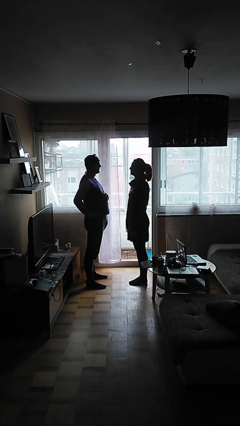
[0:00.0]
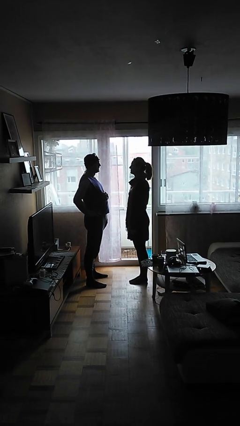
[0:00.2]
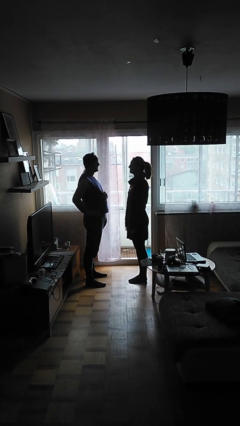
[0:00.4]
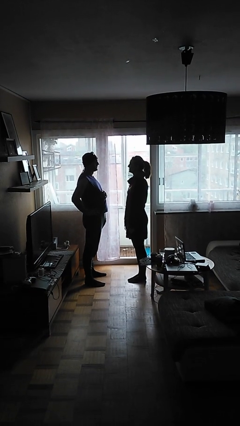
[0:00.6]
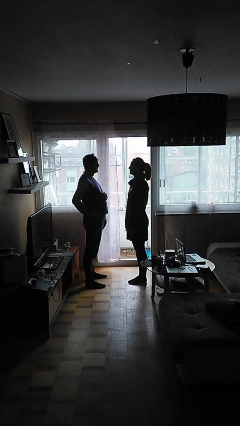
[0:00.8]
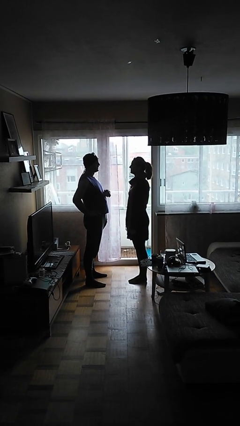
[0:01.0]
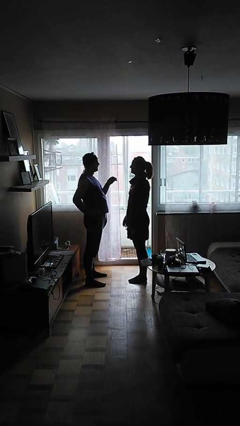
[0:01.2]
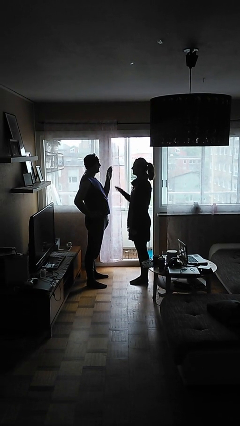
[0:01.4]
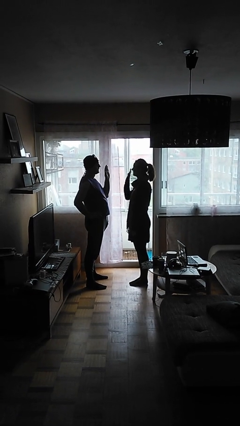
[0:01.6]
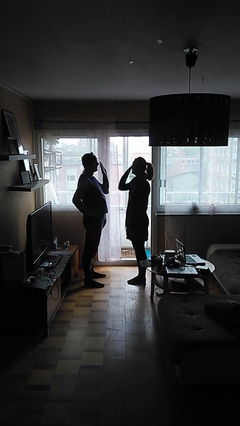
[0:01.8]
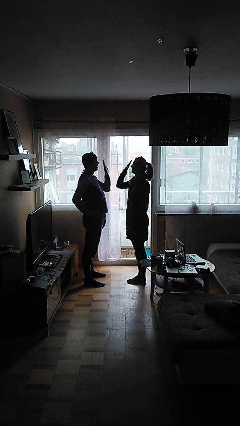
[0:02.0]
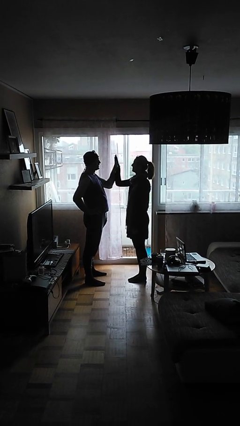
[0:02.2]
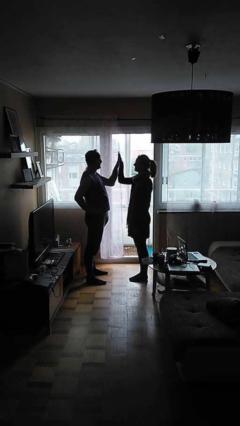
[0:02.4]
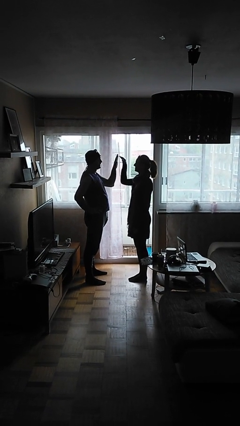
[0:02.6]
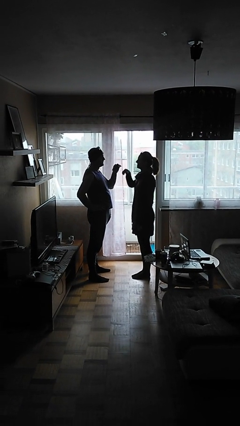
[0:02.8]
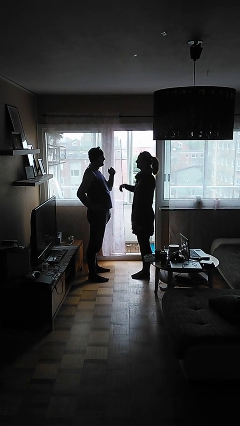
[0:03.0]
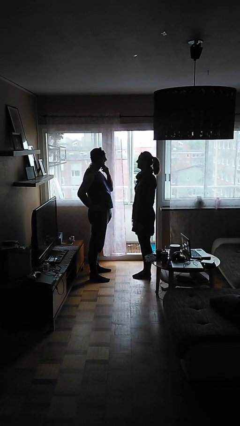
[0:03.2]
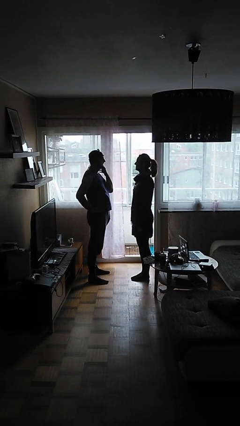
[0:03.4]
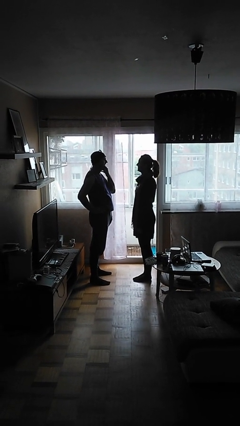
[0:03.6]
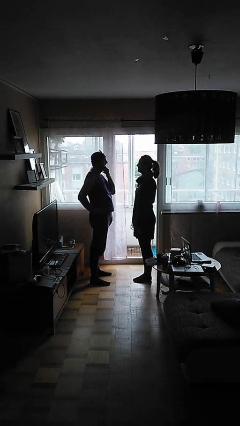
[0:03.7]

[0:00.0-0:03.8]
person highfives hand

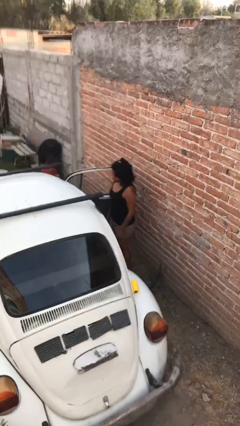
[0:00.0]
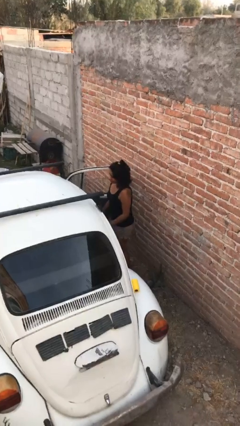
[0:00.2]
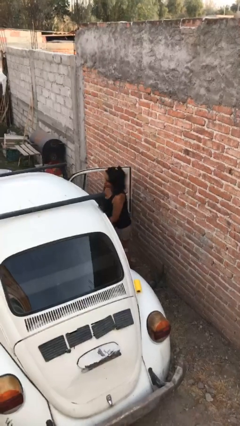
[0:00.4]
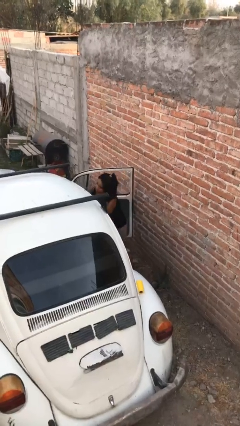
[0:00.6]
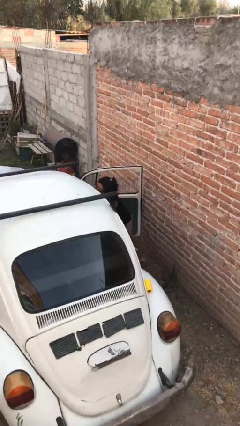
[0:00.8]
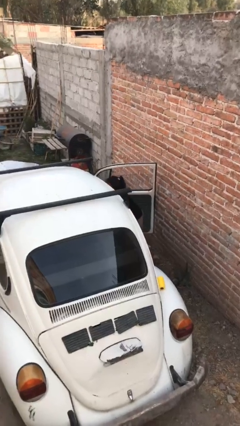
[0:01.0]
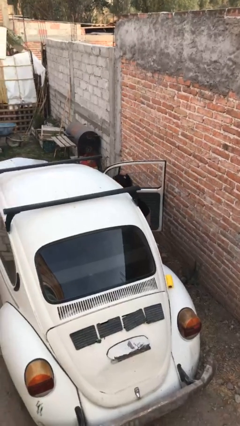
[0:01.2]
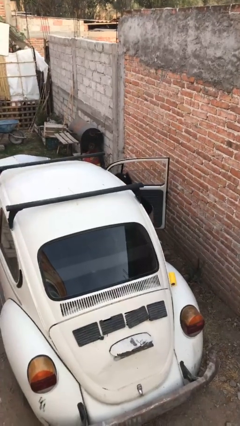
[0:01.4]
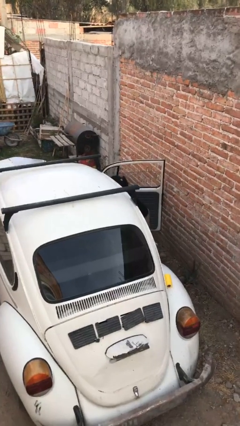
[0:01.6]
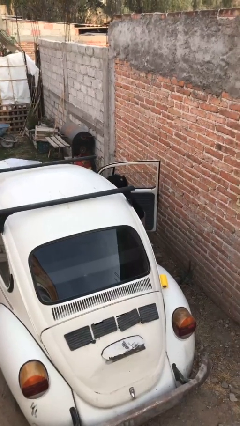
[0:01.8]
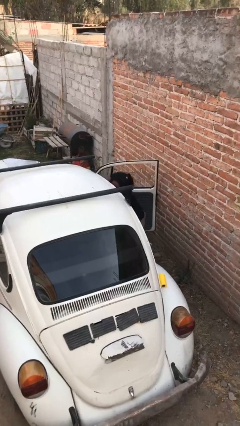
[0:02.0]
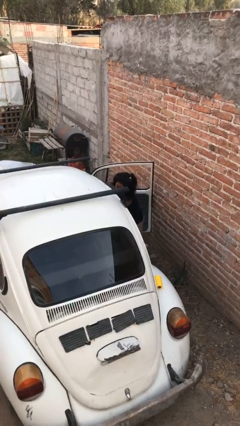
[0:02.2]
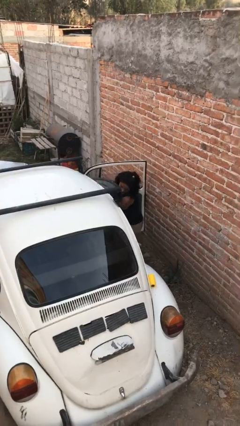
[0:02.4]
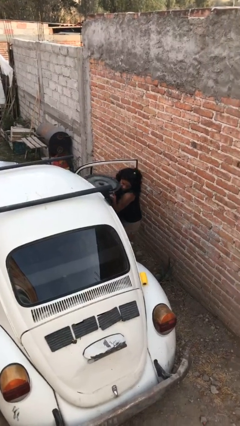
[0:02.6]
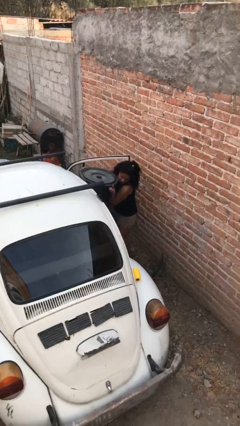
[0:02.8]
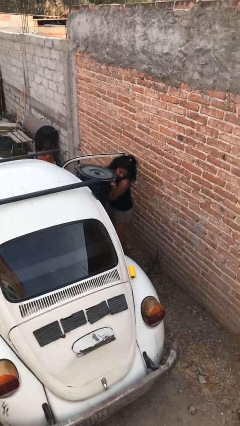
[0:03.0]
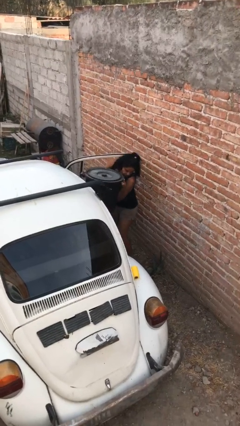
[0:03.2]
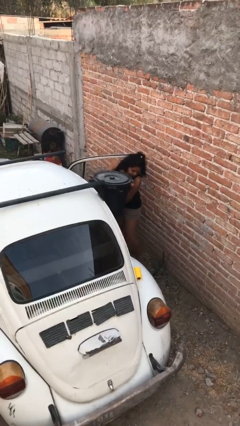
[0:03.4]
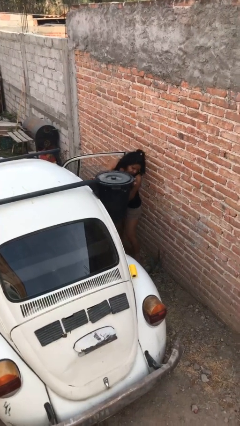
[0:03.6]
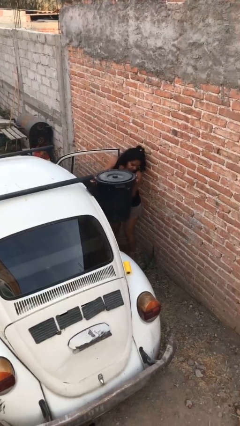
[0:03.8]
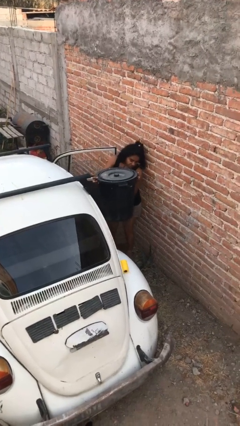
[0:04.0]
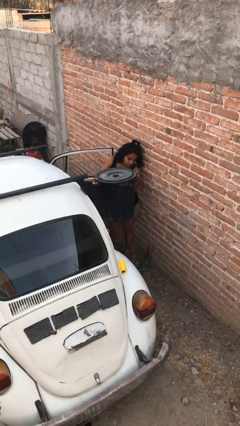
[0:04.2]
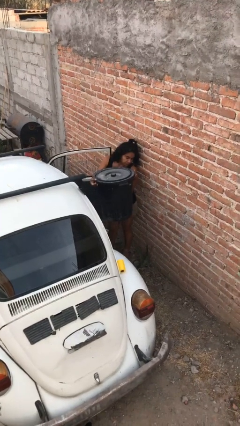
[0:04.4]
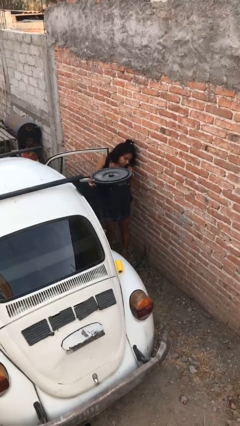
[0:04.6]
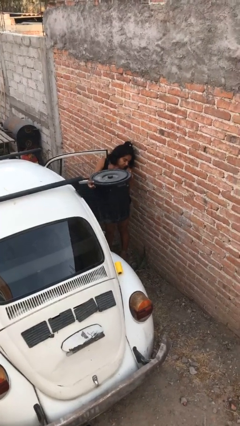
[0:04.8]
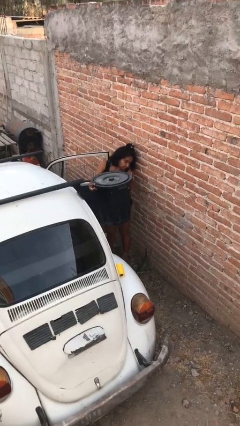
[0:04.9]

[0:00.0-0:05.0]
person unloads car

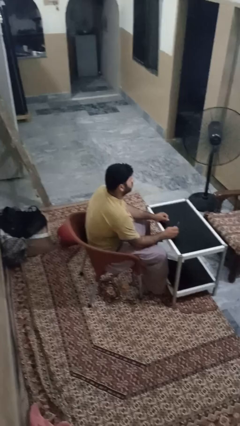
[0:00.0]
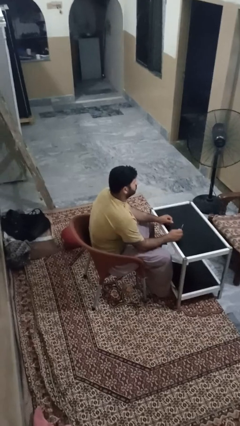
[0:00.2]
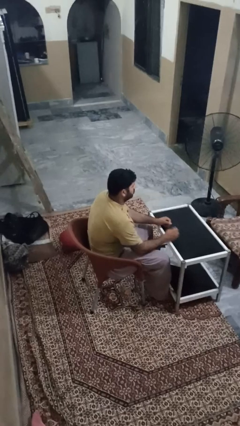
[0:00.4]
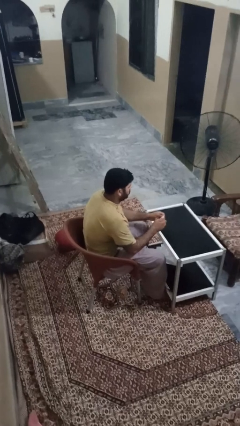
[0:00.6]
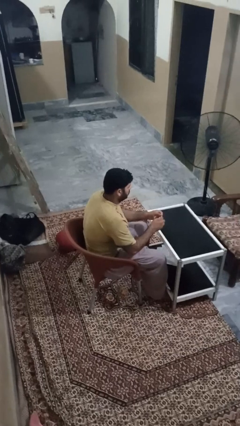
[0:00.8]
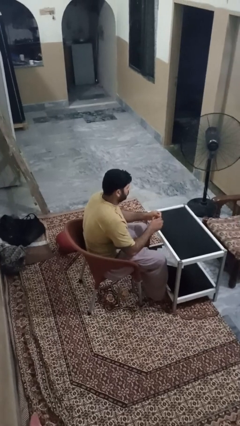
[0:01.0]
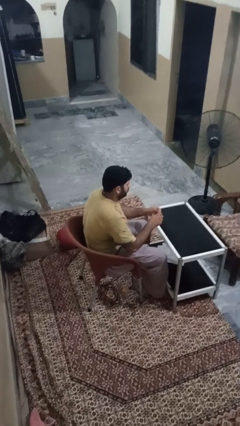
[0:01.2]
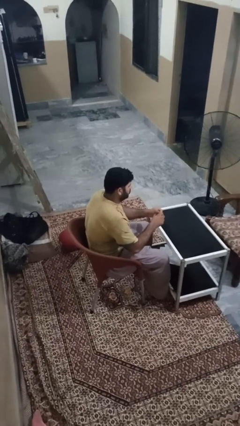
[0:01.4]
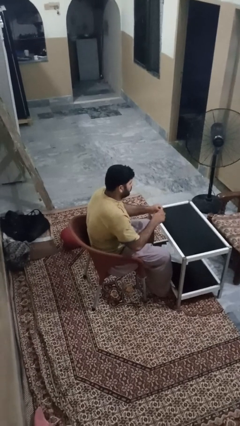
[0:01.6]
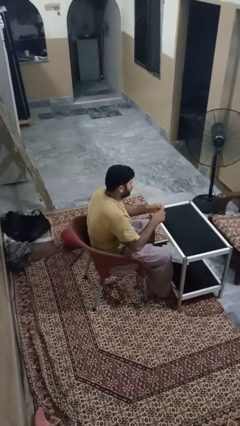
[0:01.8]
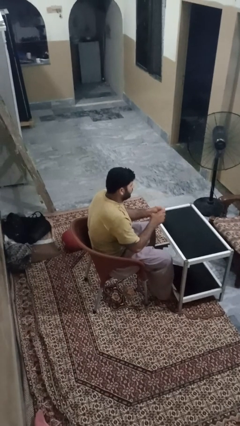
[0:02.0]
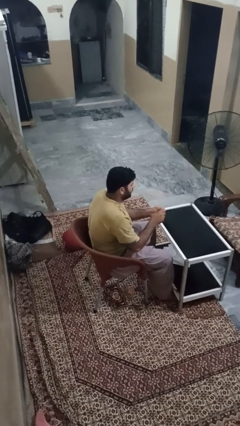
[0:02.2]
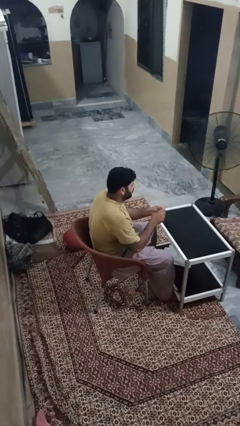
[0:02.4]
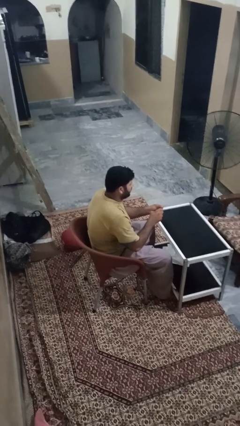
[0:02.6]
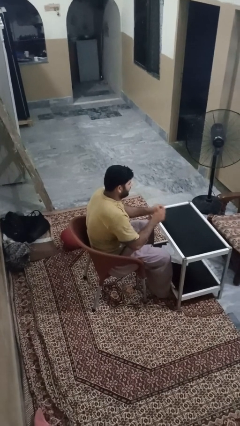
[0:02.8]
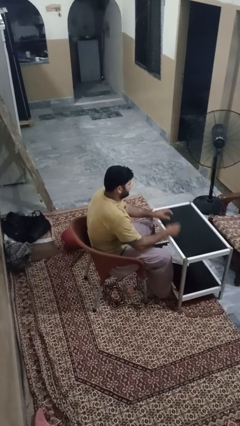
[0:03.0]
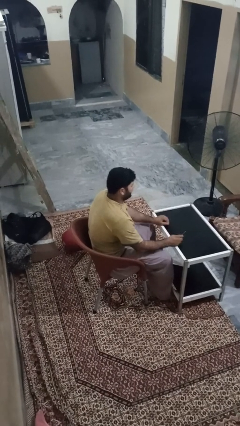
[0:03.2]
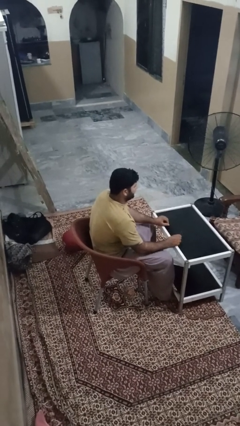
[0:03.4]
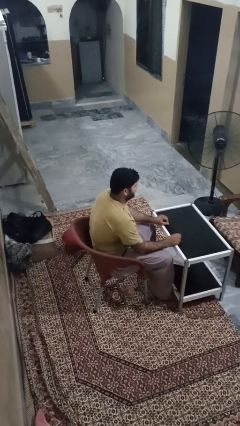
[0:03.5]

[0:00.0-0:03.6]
person files fingernails

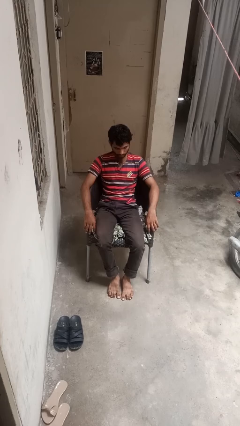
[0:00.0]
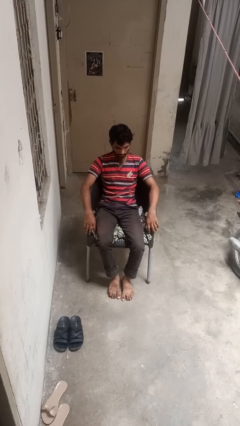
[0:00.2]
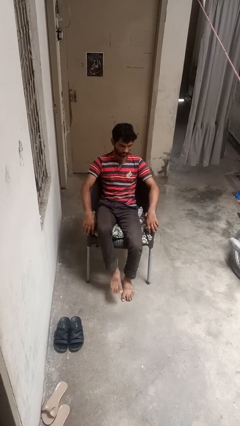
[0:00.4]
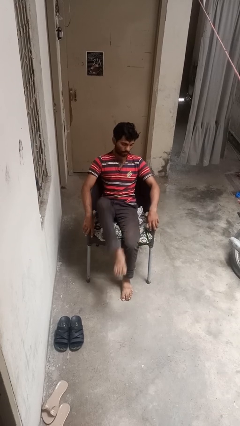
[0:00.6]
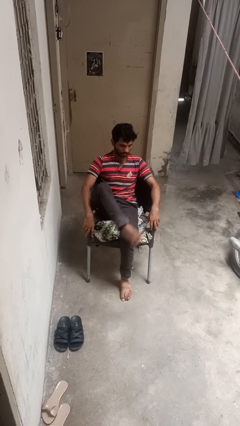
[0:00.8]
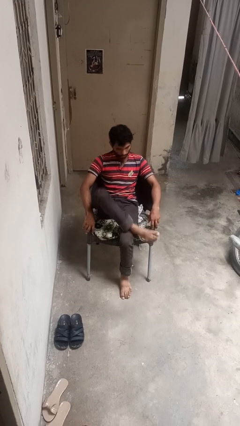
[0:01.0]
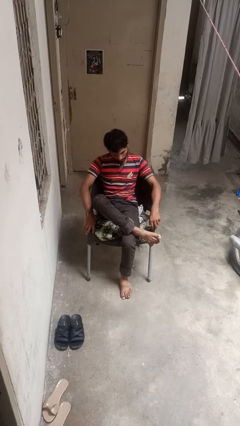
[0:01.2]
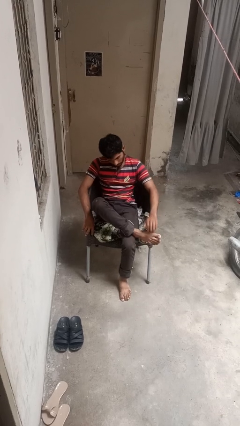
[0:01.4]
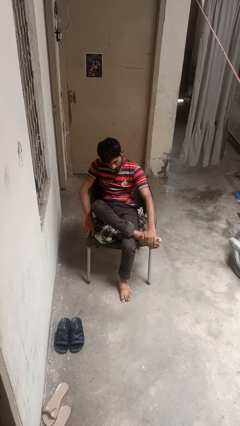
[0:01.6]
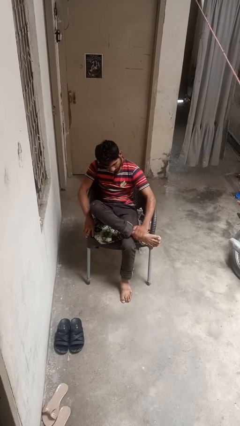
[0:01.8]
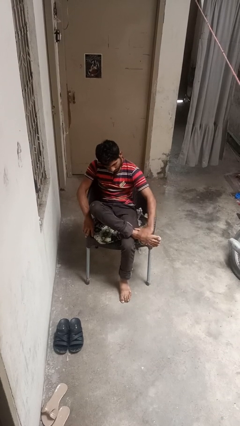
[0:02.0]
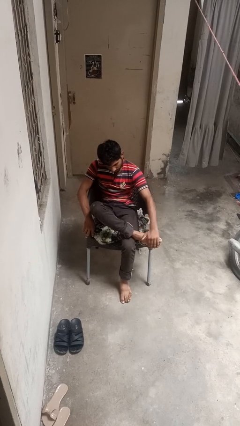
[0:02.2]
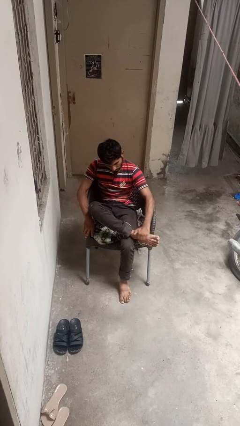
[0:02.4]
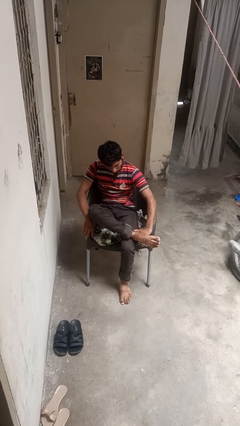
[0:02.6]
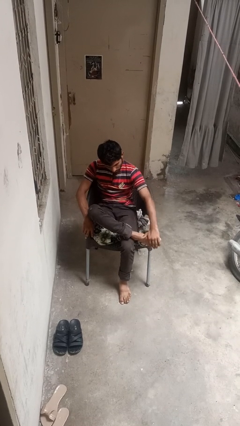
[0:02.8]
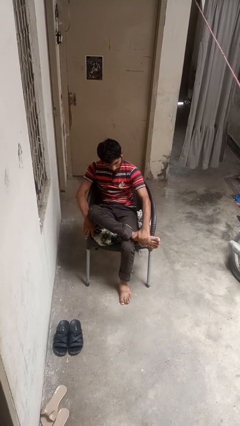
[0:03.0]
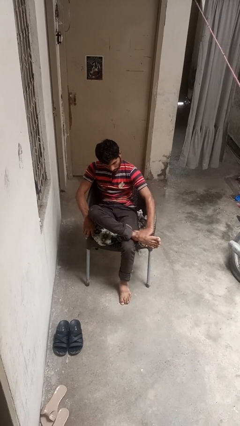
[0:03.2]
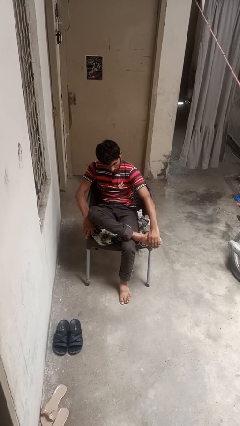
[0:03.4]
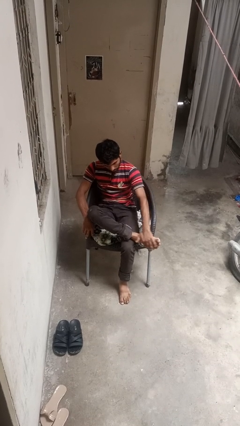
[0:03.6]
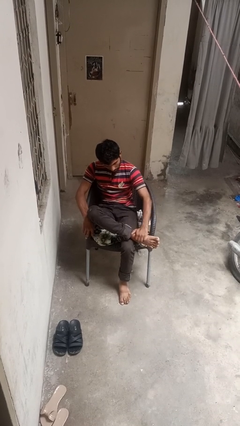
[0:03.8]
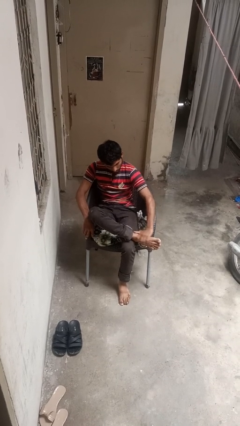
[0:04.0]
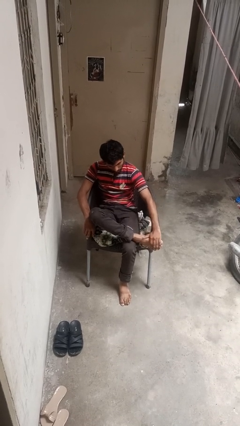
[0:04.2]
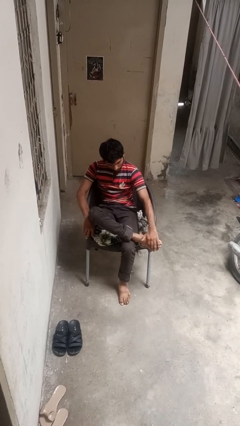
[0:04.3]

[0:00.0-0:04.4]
person rubs foot

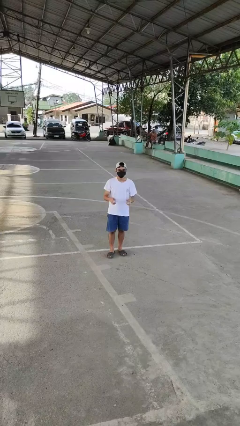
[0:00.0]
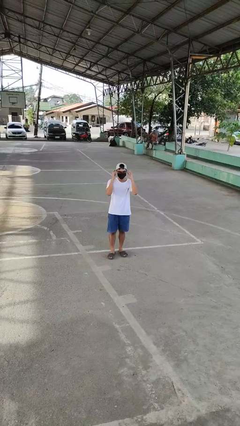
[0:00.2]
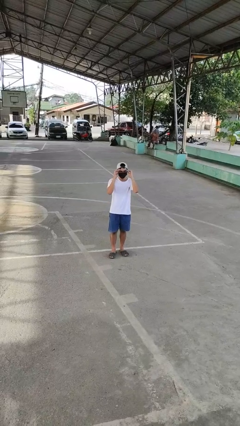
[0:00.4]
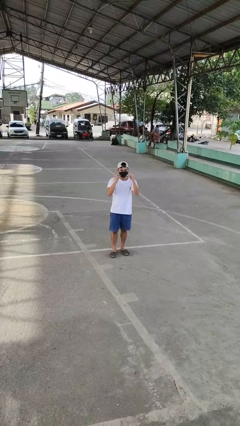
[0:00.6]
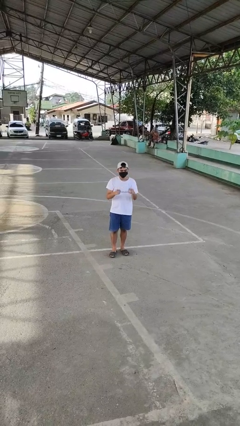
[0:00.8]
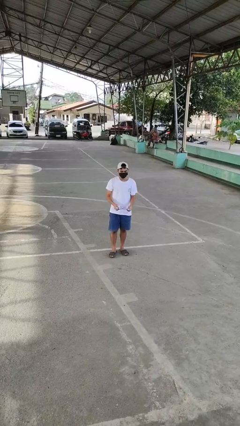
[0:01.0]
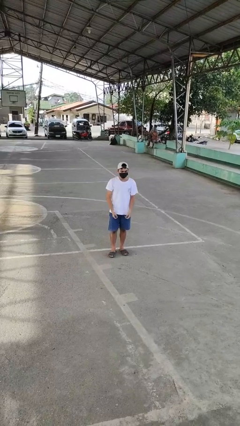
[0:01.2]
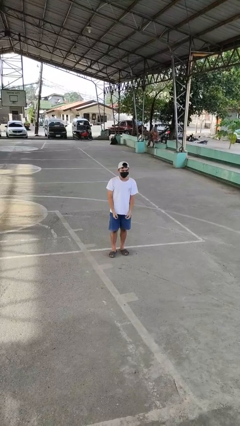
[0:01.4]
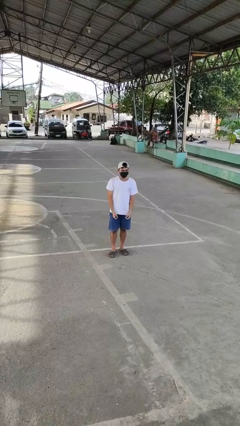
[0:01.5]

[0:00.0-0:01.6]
person takes off glasses
